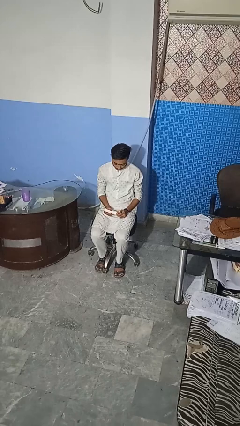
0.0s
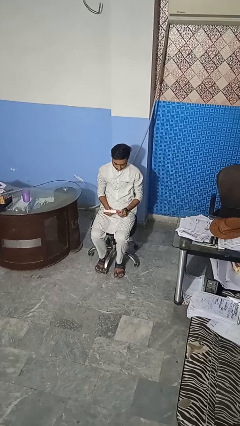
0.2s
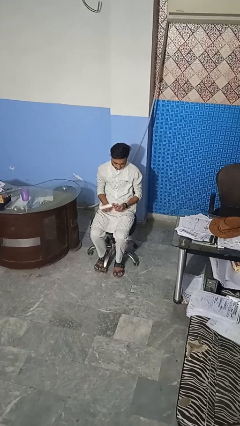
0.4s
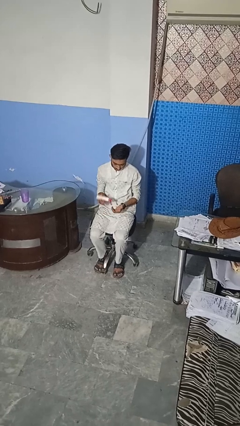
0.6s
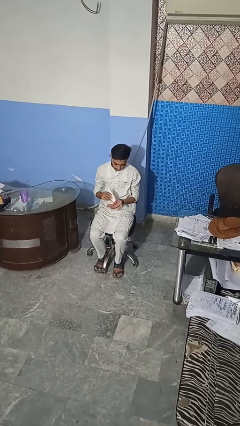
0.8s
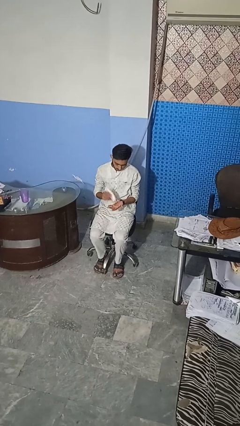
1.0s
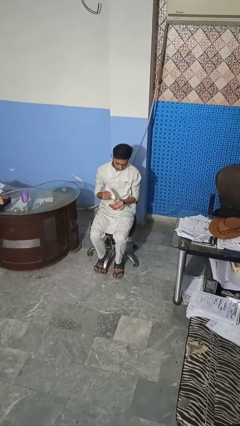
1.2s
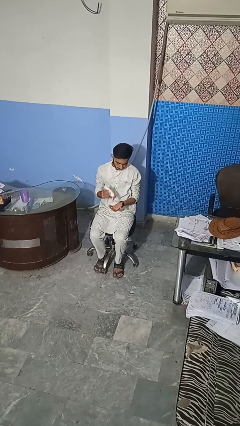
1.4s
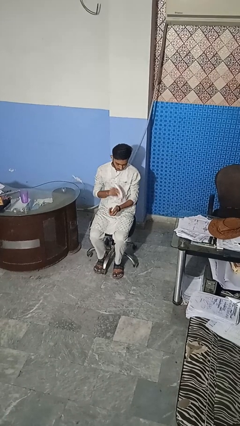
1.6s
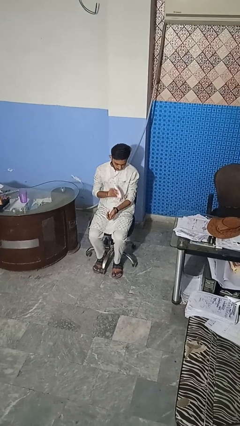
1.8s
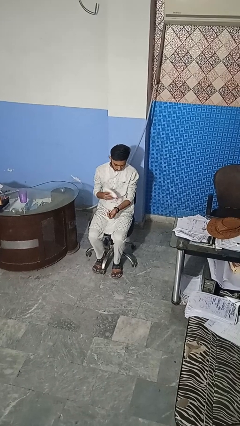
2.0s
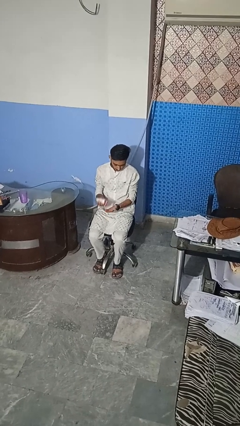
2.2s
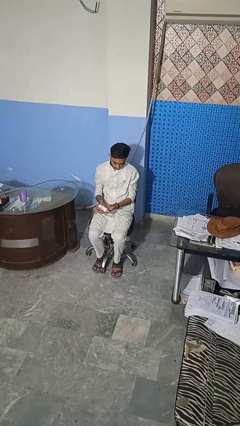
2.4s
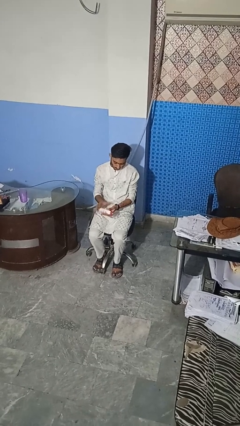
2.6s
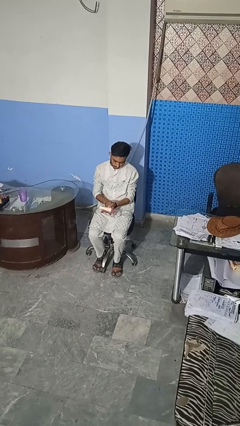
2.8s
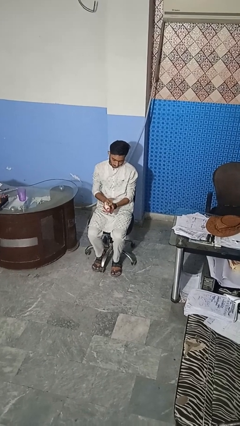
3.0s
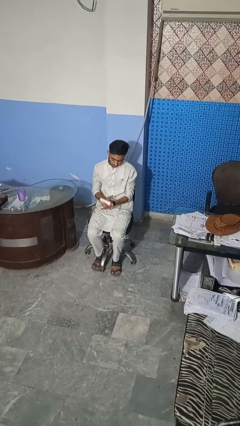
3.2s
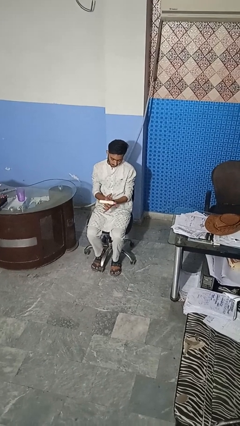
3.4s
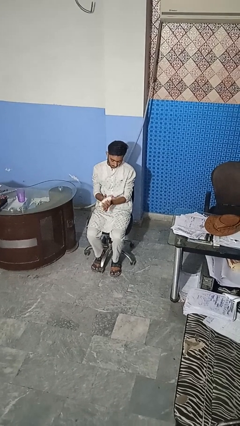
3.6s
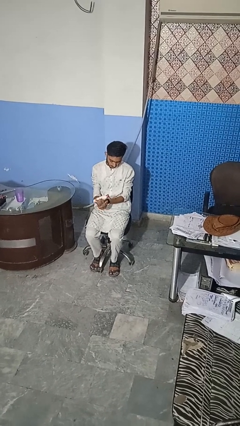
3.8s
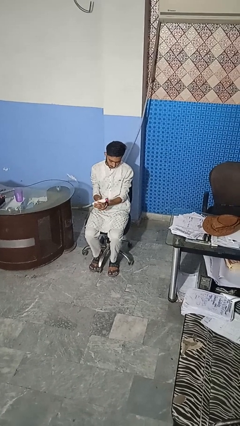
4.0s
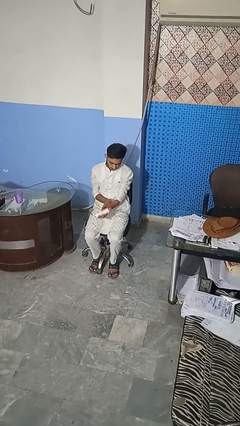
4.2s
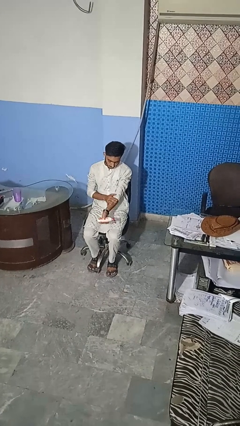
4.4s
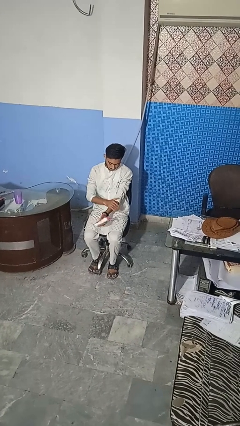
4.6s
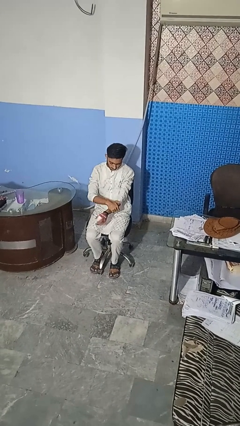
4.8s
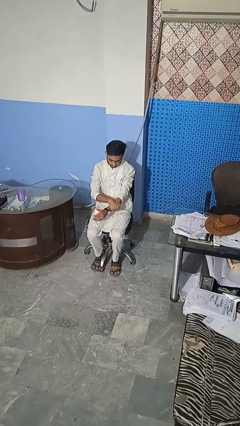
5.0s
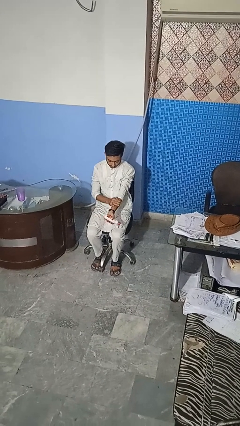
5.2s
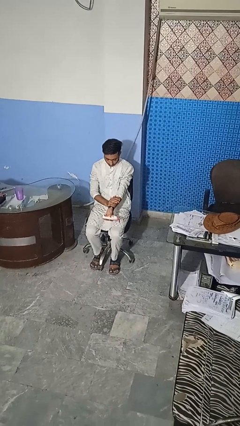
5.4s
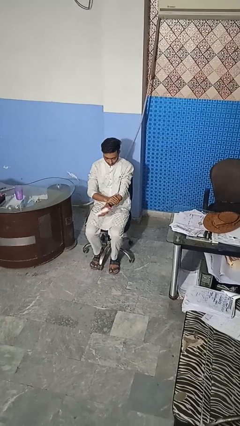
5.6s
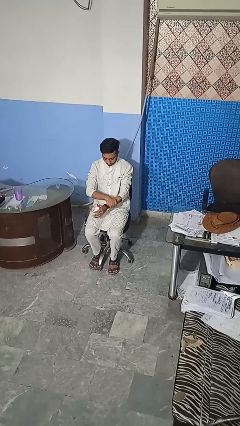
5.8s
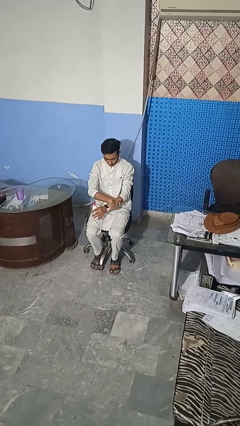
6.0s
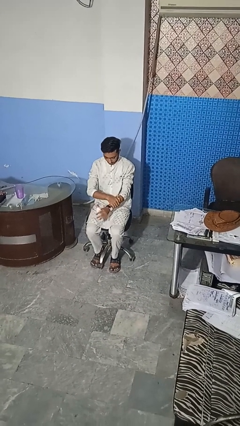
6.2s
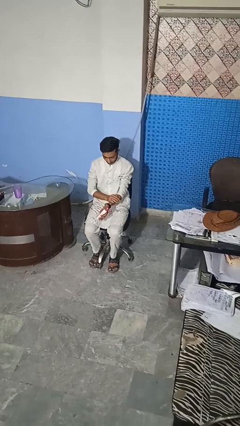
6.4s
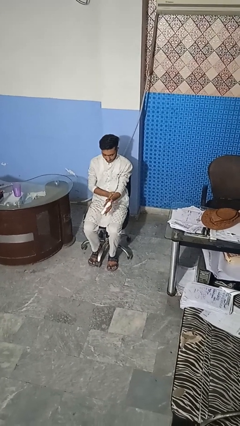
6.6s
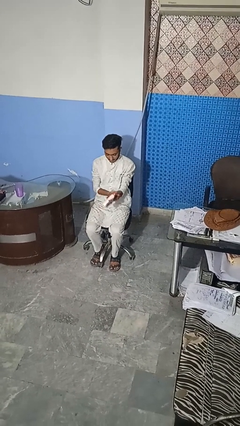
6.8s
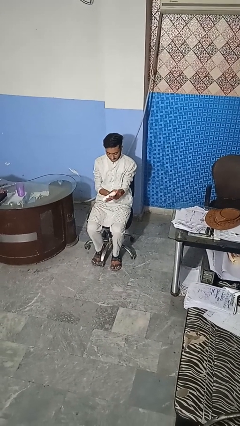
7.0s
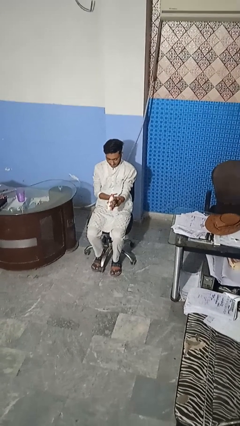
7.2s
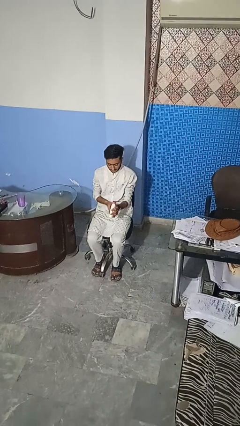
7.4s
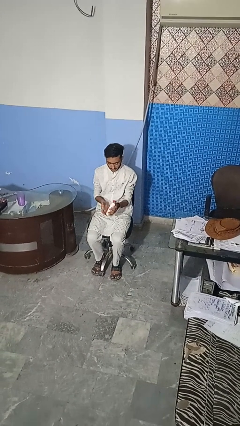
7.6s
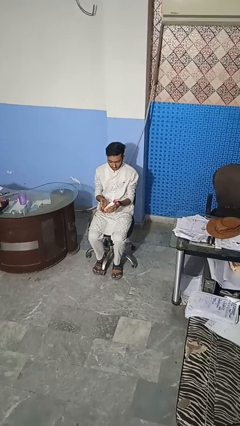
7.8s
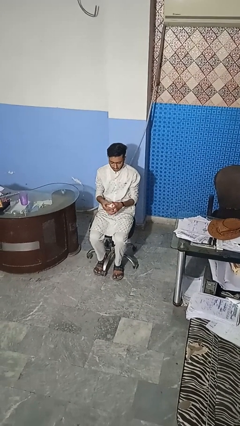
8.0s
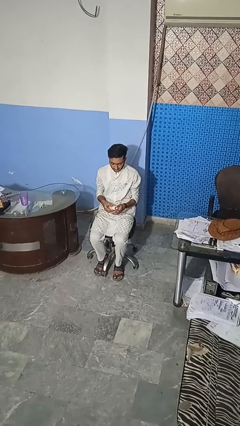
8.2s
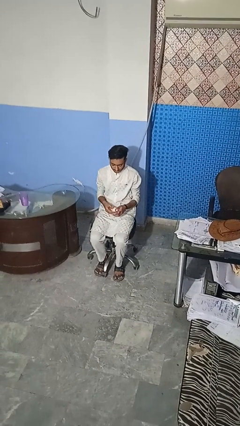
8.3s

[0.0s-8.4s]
person applies sunscreen

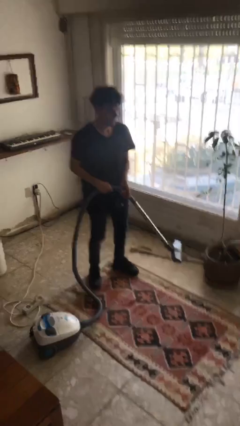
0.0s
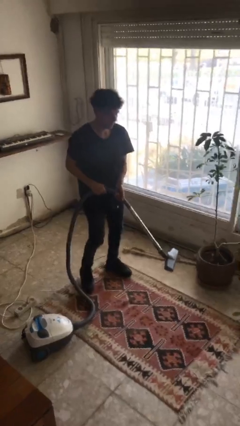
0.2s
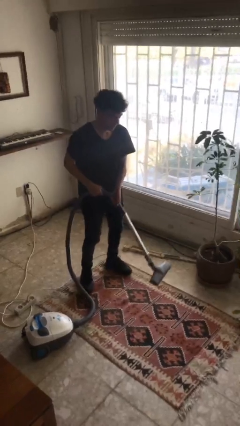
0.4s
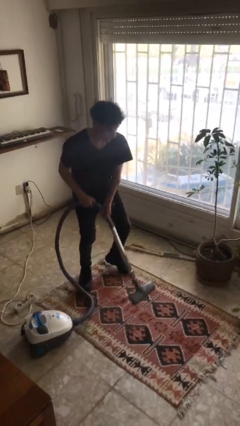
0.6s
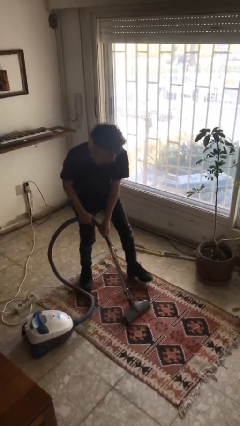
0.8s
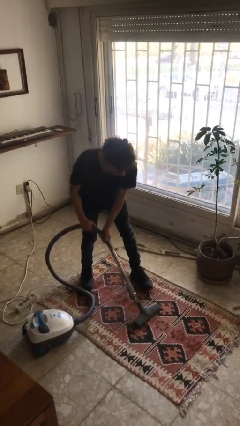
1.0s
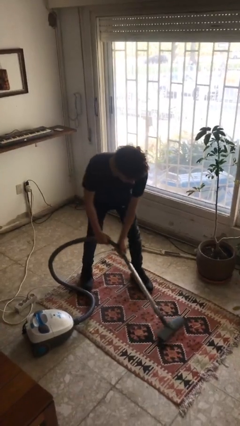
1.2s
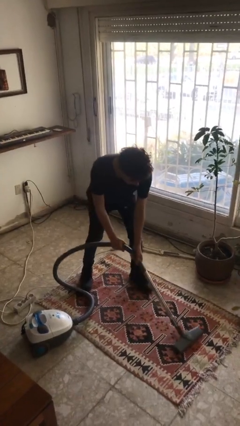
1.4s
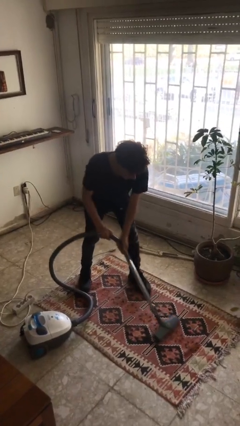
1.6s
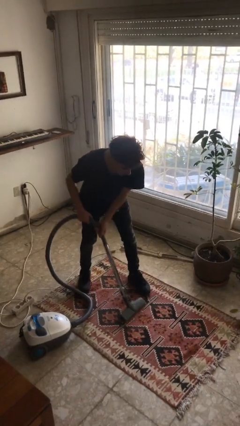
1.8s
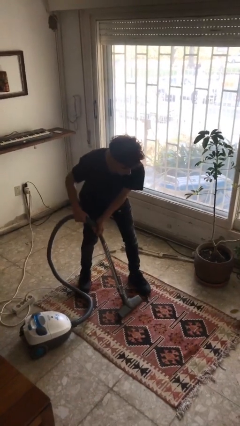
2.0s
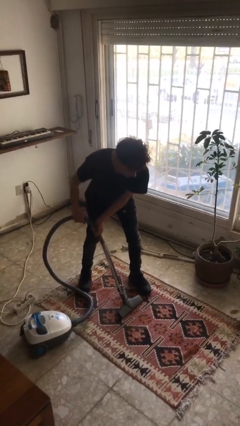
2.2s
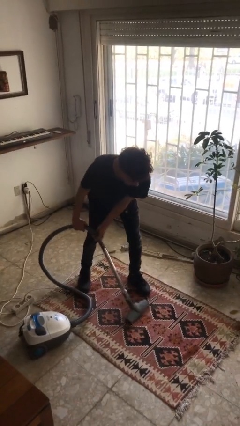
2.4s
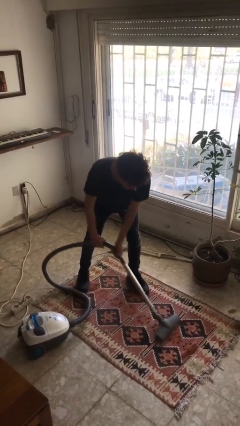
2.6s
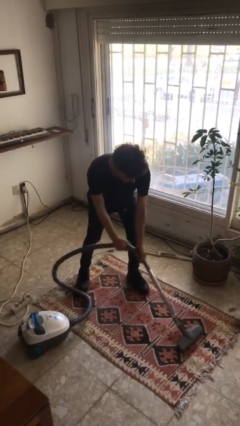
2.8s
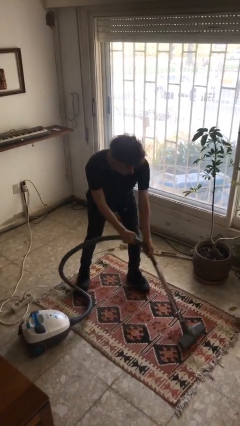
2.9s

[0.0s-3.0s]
person vacuums carpet

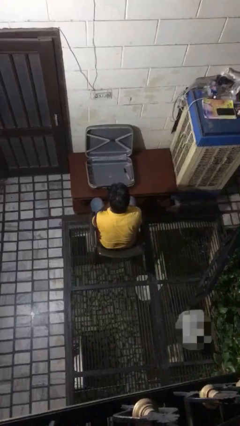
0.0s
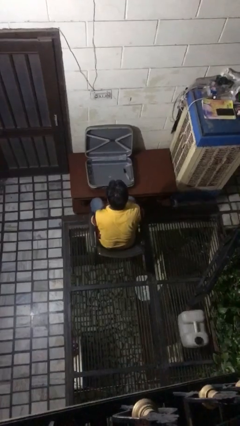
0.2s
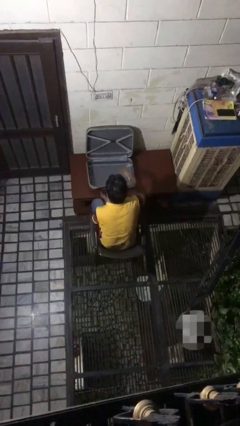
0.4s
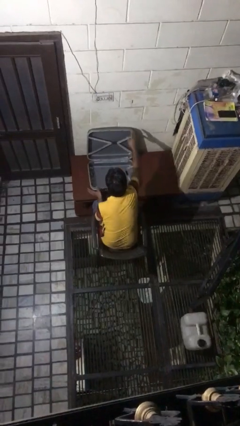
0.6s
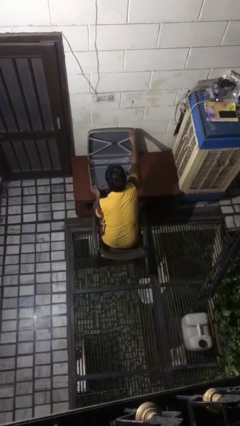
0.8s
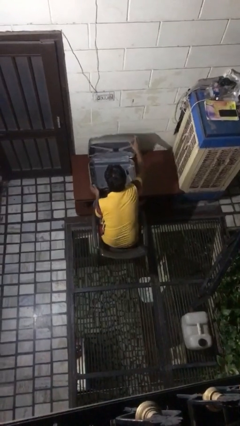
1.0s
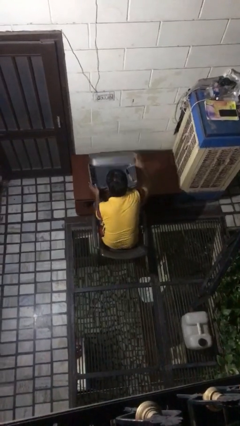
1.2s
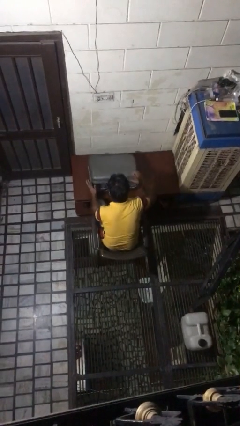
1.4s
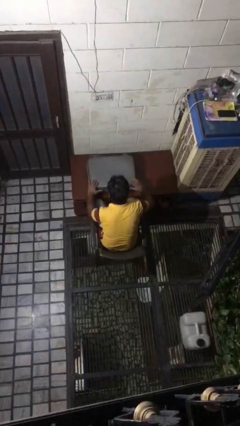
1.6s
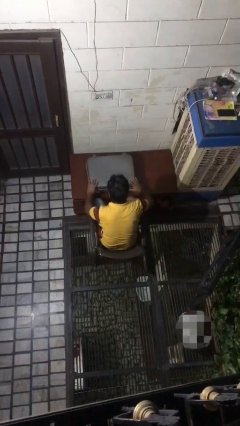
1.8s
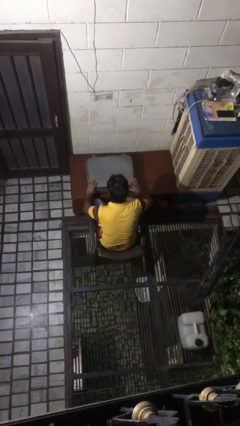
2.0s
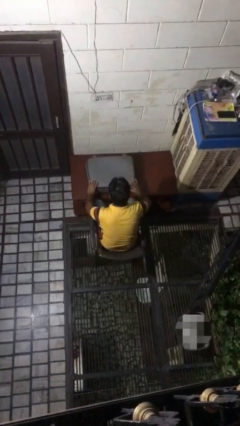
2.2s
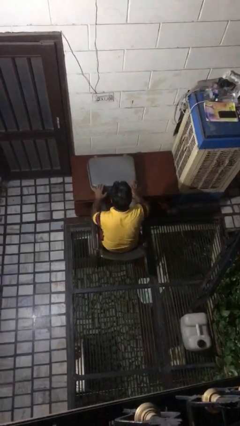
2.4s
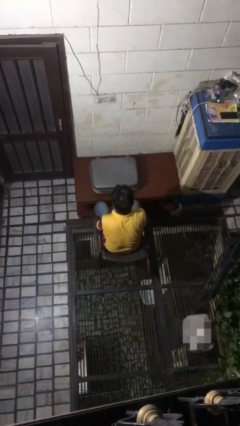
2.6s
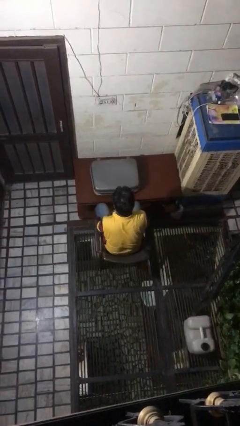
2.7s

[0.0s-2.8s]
person closes suitcase

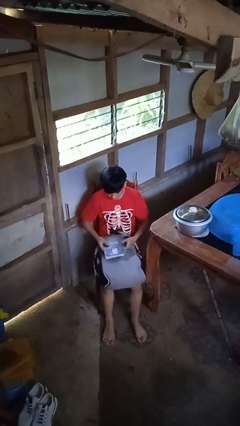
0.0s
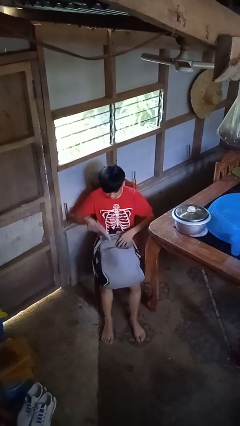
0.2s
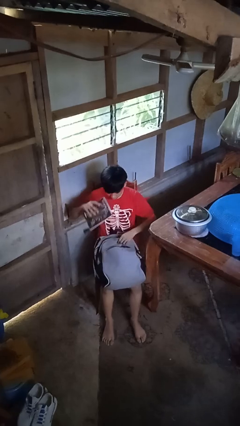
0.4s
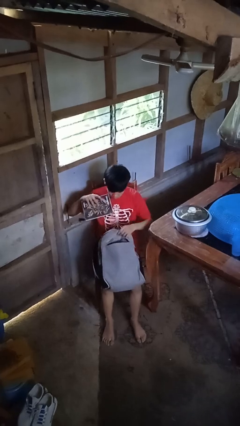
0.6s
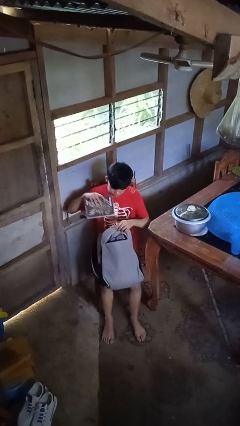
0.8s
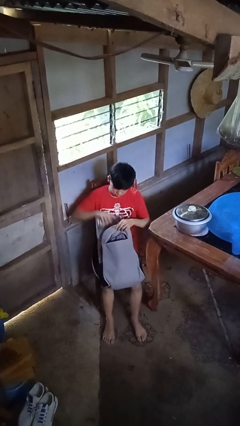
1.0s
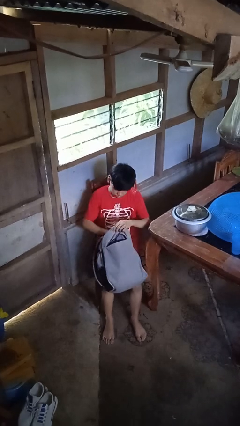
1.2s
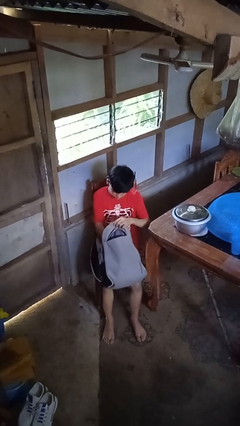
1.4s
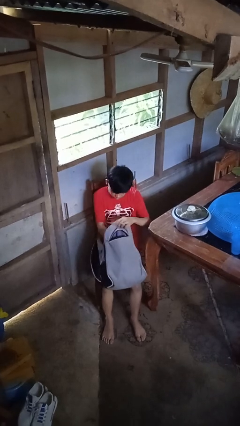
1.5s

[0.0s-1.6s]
person puts object into backpack

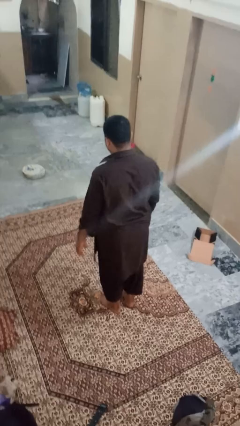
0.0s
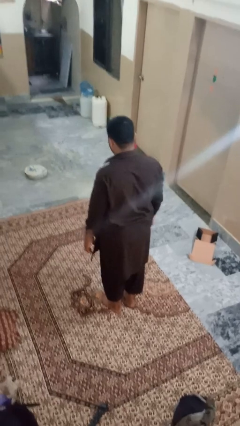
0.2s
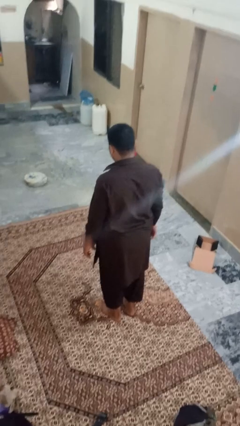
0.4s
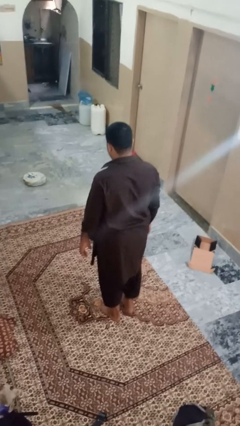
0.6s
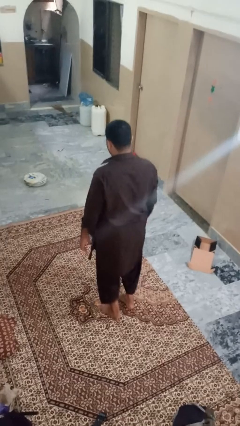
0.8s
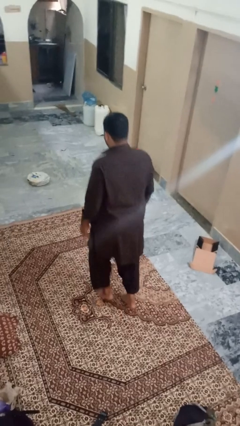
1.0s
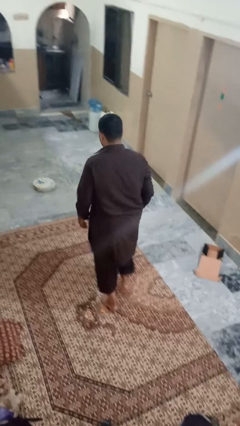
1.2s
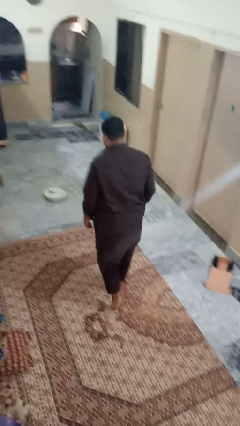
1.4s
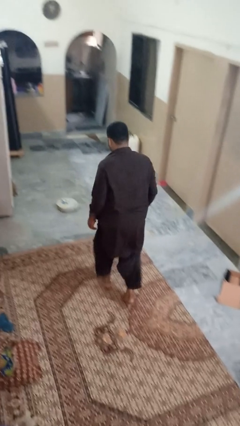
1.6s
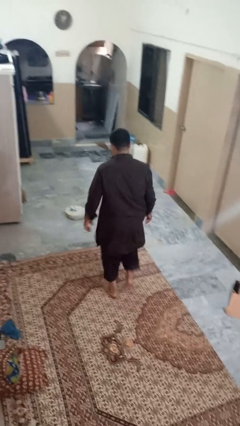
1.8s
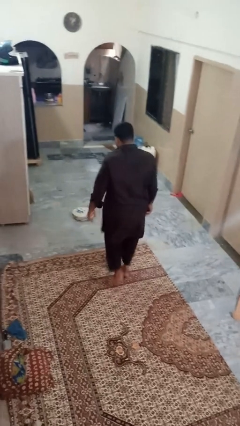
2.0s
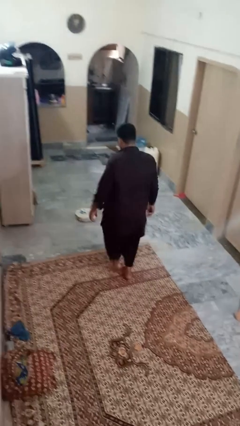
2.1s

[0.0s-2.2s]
person walks tiptoe
